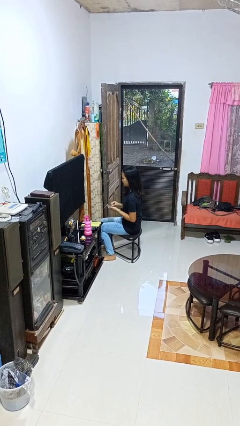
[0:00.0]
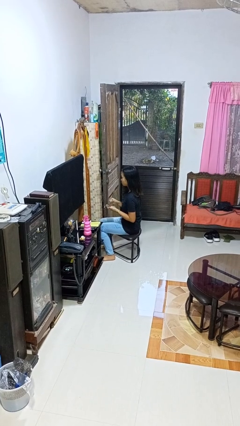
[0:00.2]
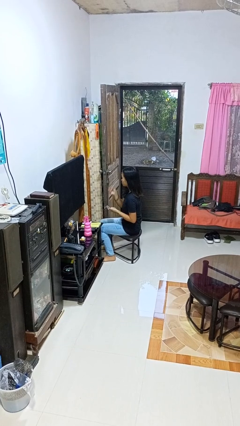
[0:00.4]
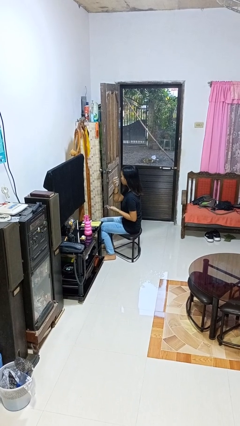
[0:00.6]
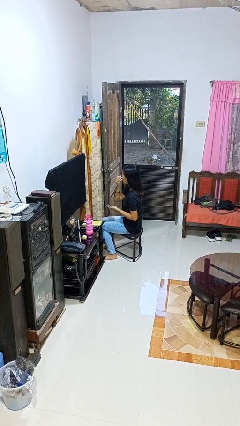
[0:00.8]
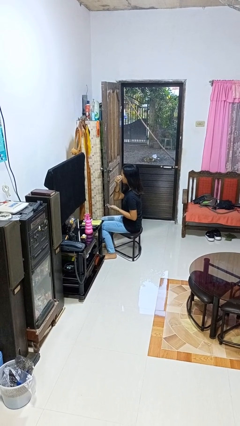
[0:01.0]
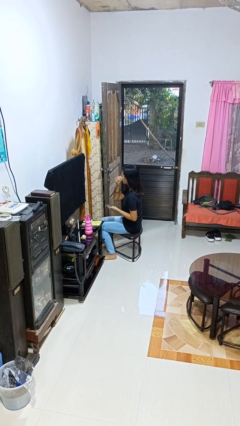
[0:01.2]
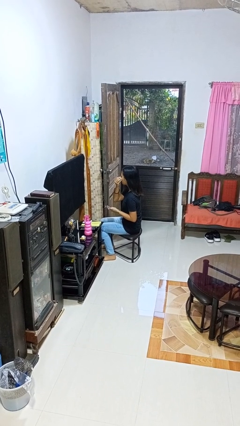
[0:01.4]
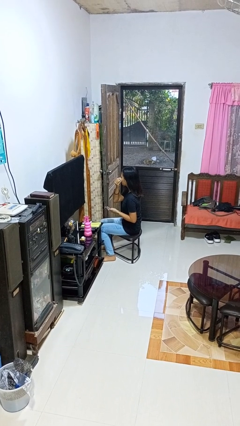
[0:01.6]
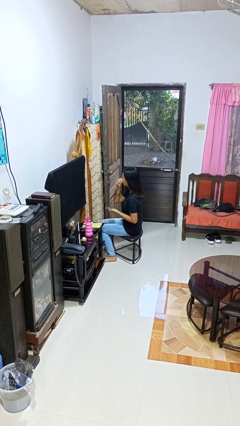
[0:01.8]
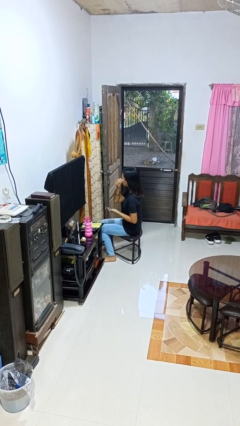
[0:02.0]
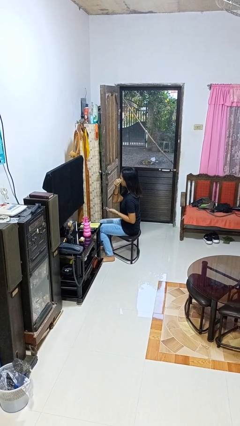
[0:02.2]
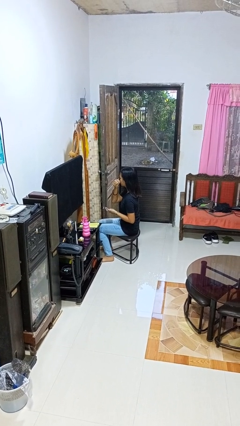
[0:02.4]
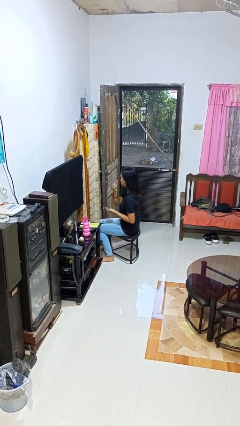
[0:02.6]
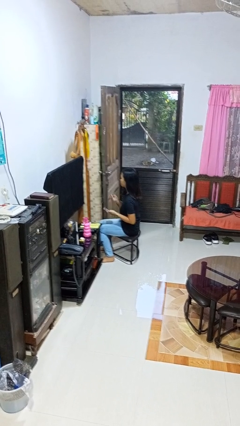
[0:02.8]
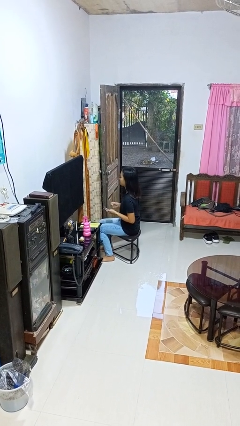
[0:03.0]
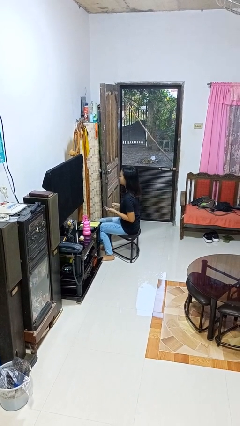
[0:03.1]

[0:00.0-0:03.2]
person applies eye makeup

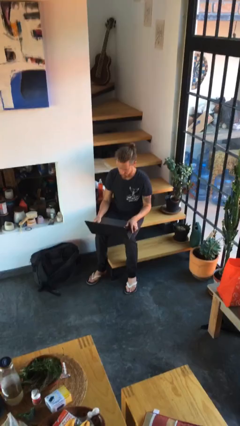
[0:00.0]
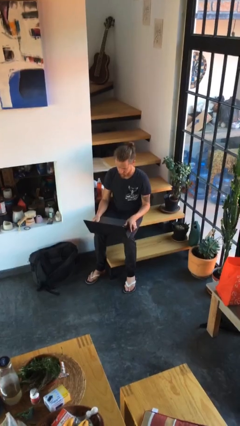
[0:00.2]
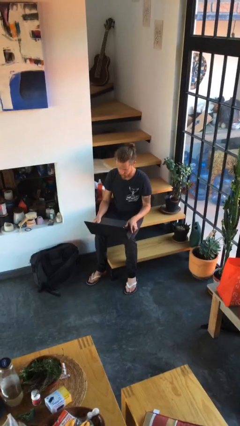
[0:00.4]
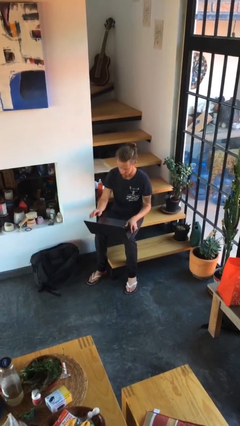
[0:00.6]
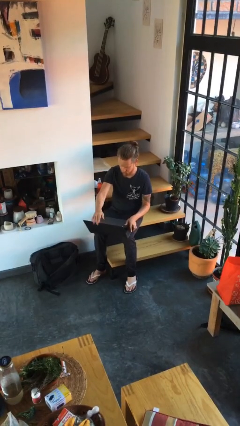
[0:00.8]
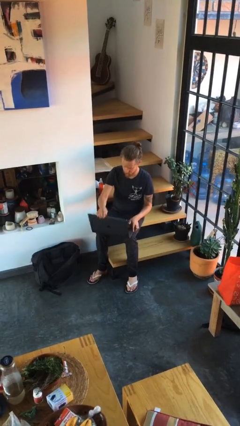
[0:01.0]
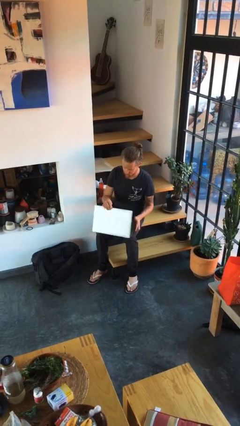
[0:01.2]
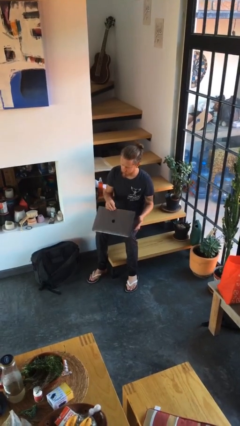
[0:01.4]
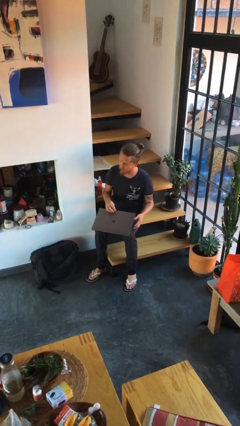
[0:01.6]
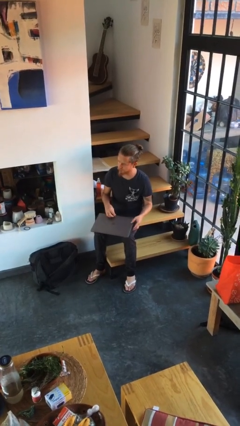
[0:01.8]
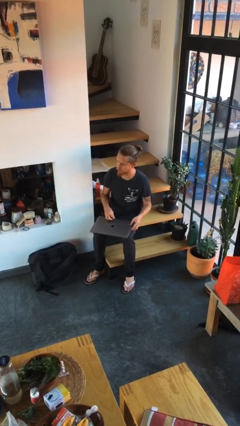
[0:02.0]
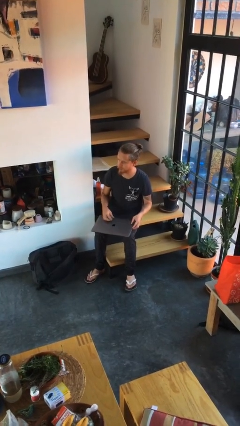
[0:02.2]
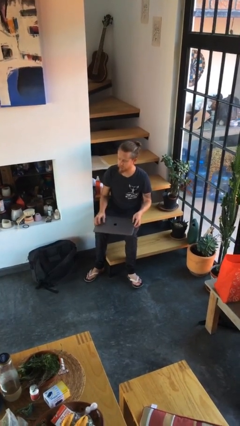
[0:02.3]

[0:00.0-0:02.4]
person closes laptop

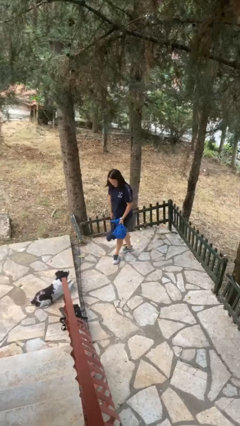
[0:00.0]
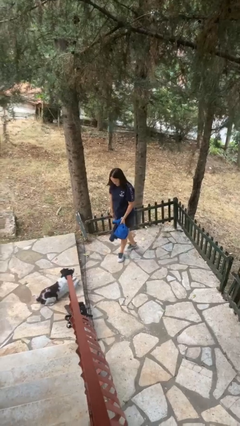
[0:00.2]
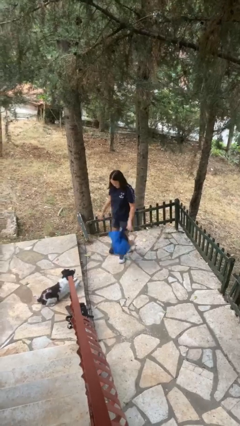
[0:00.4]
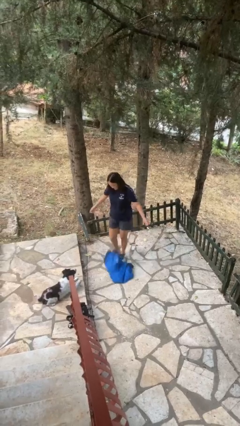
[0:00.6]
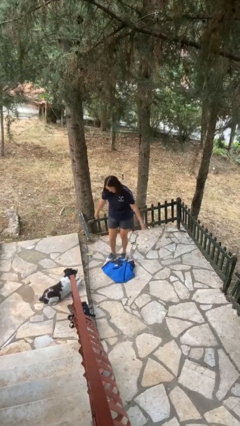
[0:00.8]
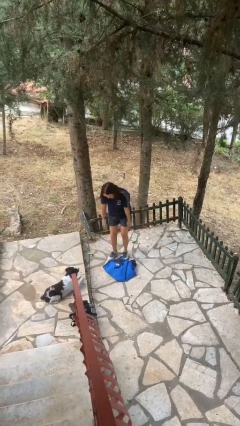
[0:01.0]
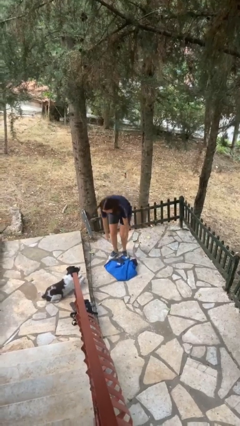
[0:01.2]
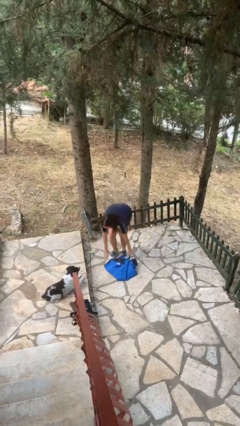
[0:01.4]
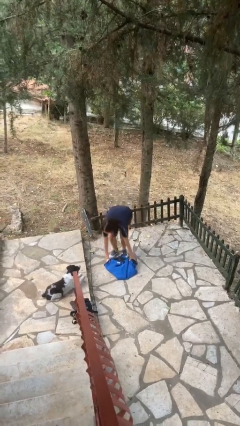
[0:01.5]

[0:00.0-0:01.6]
person drops object

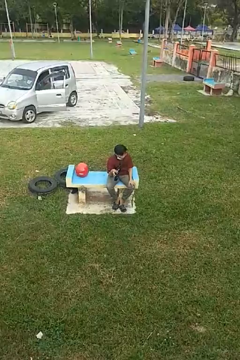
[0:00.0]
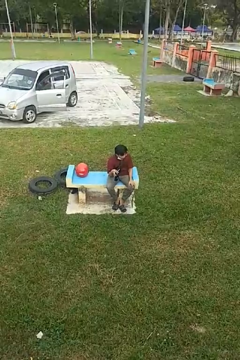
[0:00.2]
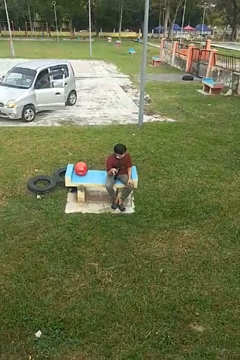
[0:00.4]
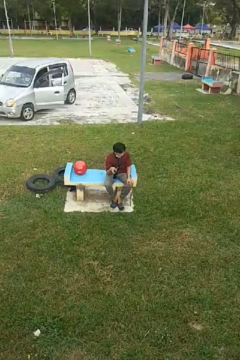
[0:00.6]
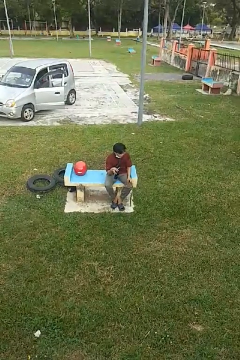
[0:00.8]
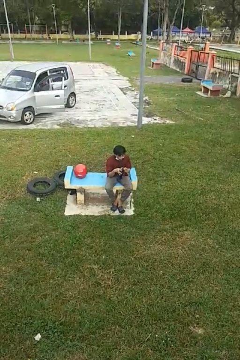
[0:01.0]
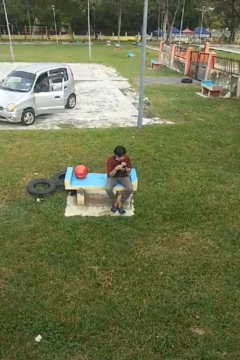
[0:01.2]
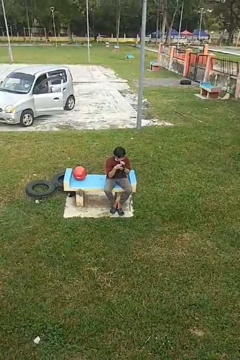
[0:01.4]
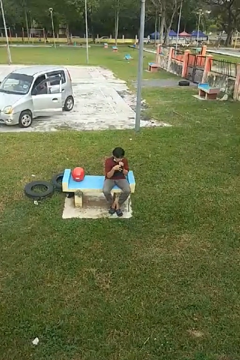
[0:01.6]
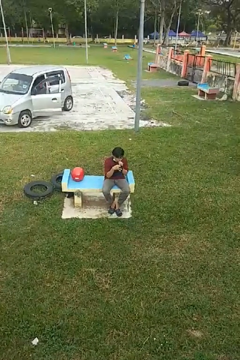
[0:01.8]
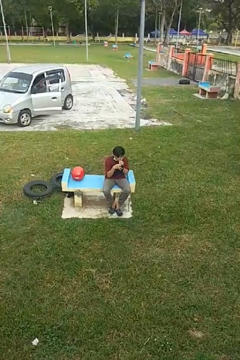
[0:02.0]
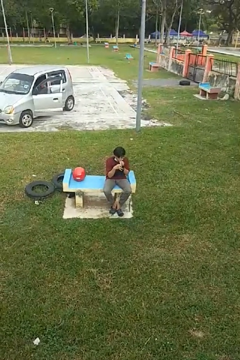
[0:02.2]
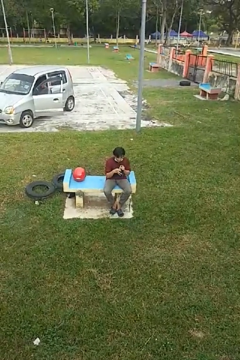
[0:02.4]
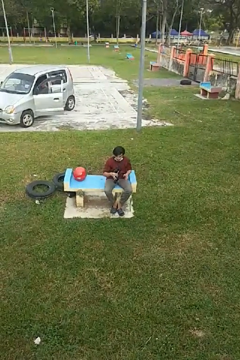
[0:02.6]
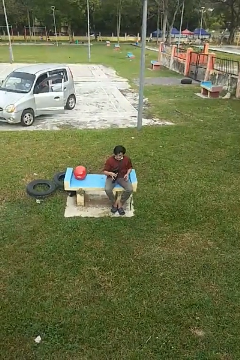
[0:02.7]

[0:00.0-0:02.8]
person drinks from straw

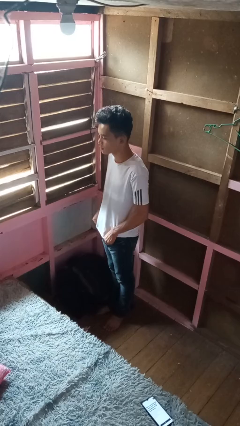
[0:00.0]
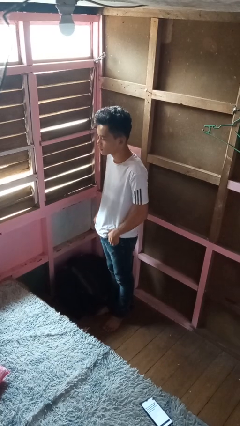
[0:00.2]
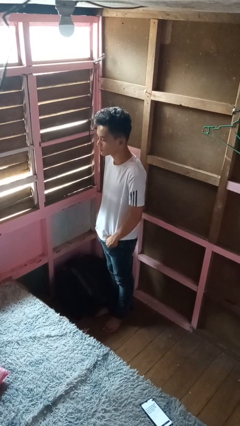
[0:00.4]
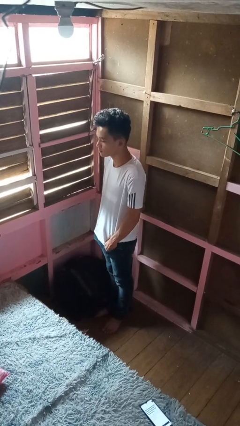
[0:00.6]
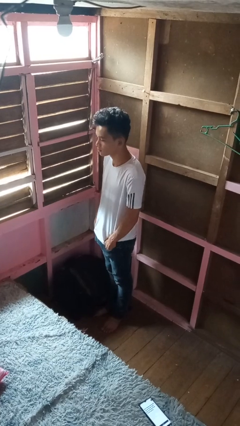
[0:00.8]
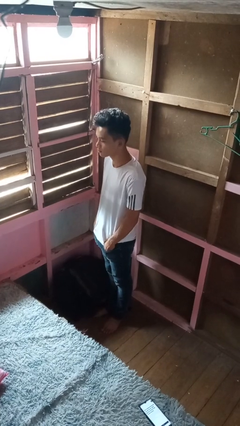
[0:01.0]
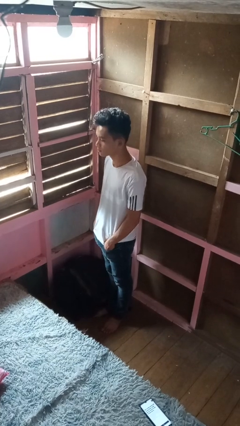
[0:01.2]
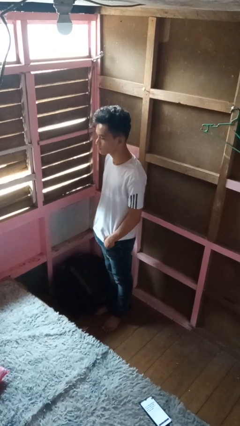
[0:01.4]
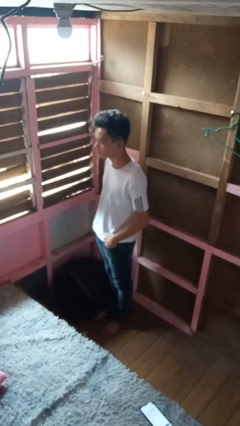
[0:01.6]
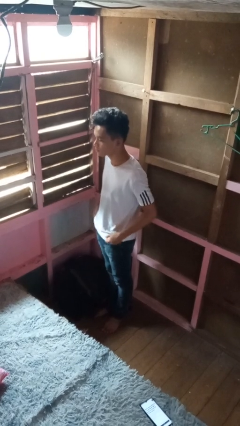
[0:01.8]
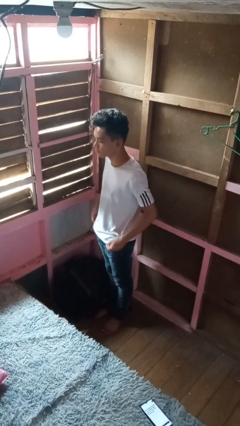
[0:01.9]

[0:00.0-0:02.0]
person puts hands in back pockets

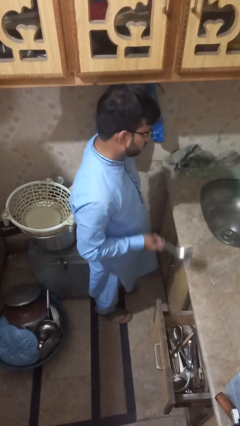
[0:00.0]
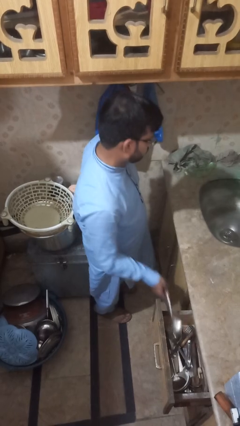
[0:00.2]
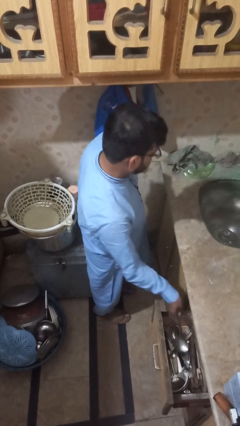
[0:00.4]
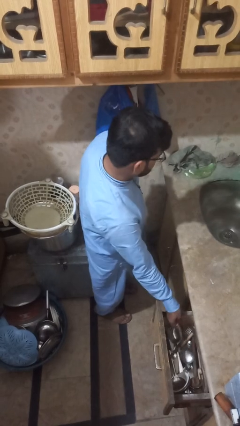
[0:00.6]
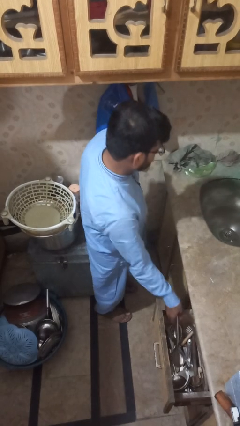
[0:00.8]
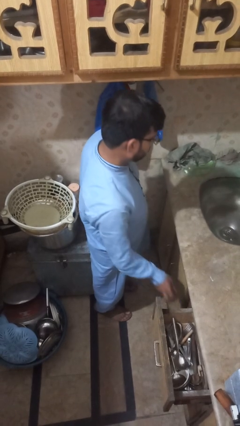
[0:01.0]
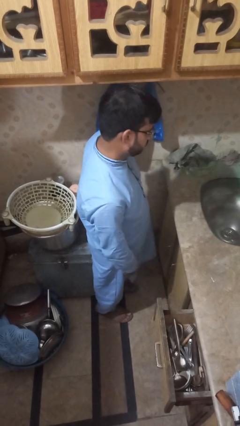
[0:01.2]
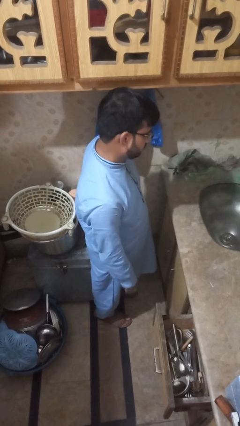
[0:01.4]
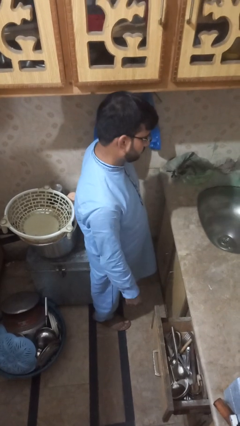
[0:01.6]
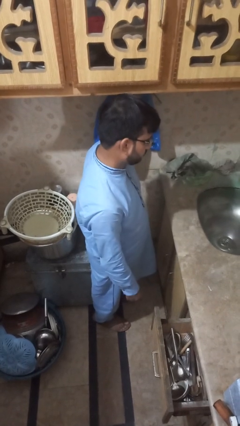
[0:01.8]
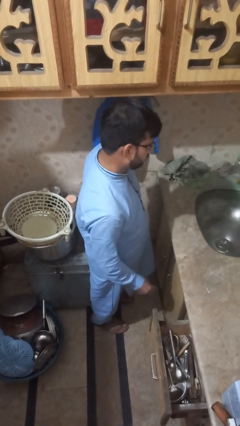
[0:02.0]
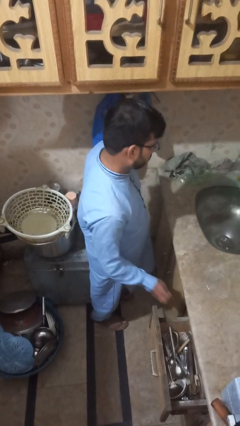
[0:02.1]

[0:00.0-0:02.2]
person puts object into kitchen drawer

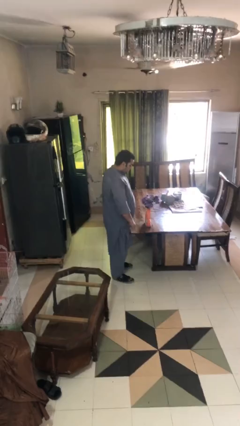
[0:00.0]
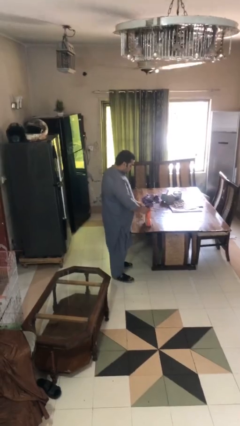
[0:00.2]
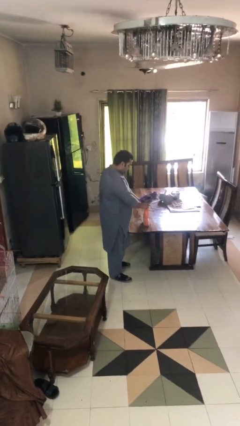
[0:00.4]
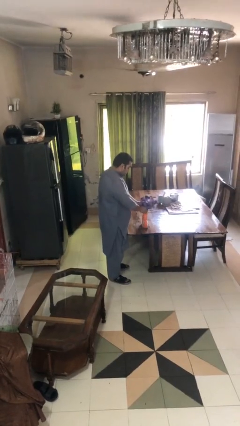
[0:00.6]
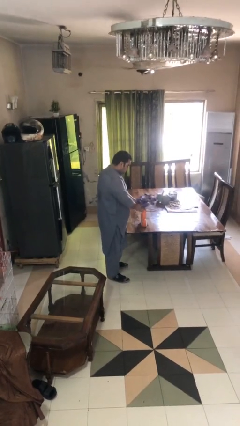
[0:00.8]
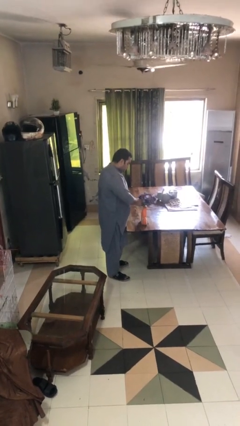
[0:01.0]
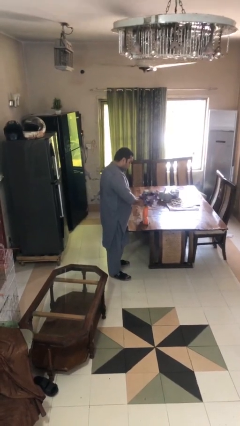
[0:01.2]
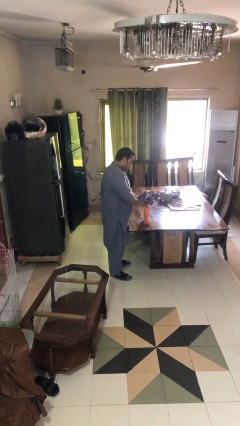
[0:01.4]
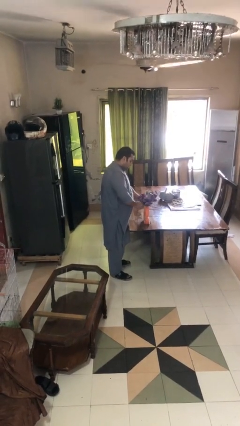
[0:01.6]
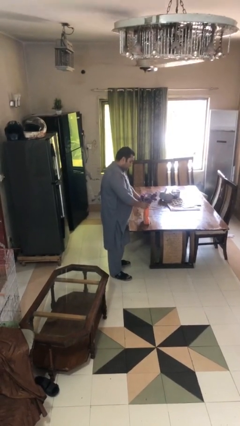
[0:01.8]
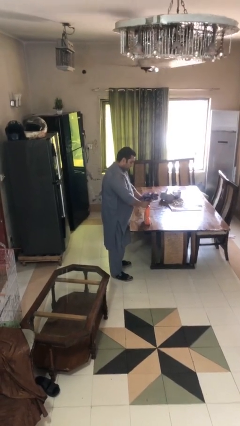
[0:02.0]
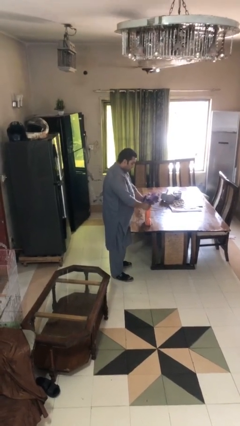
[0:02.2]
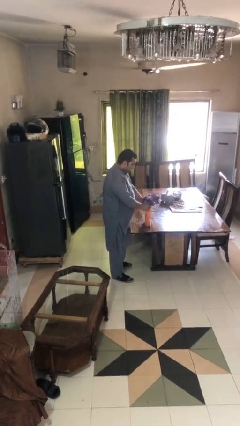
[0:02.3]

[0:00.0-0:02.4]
person arranges flowers in vase

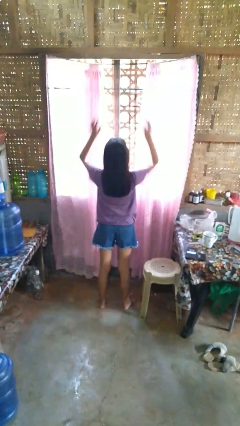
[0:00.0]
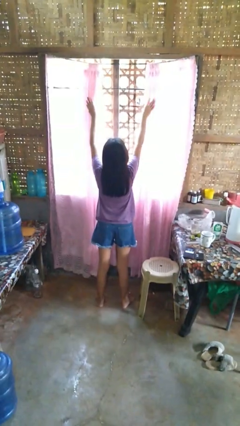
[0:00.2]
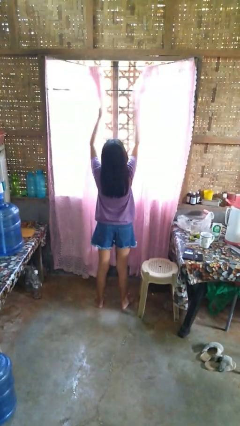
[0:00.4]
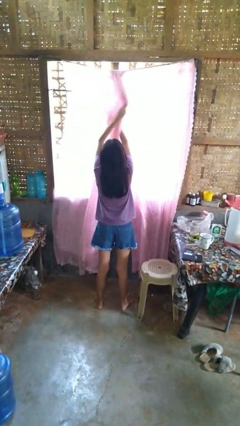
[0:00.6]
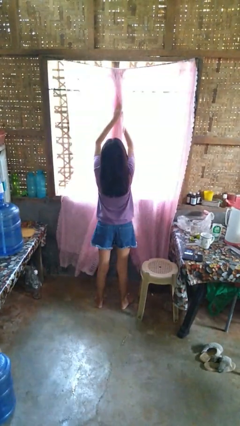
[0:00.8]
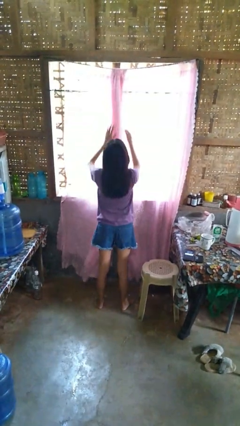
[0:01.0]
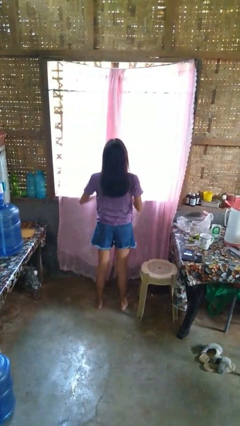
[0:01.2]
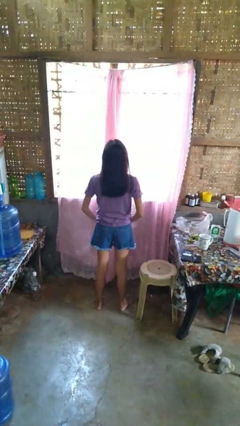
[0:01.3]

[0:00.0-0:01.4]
person closes curtains
